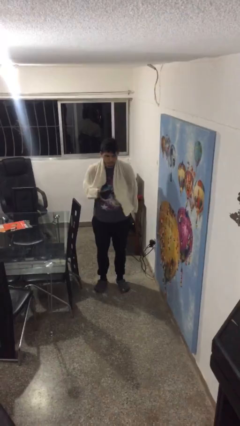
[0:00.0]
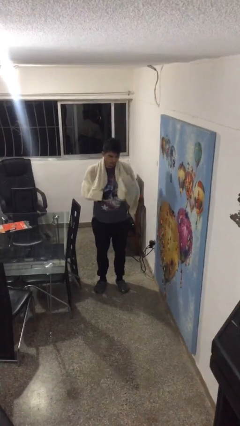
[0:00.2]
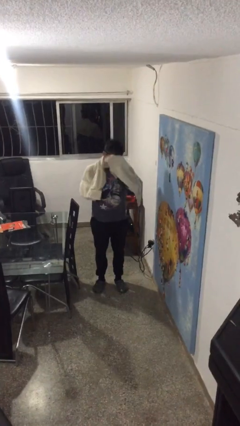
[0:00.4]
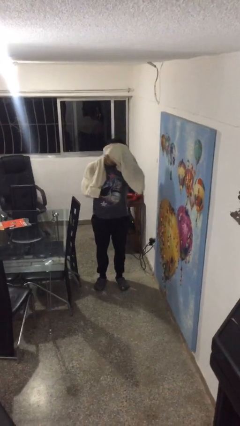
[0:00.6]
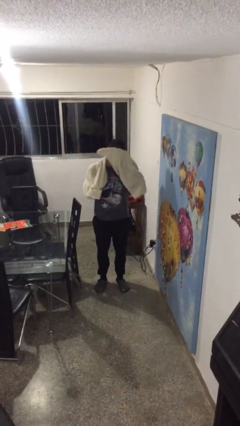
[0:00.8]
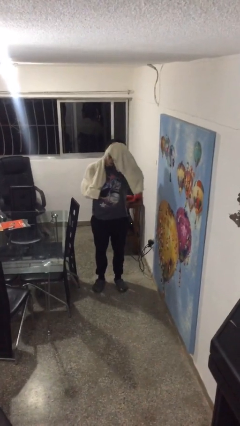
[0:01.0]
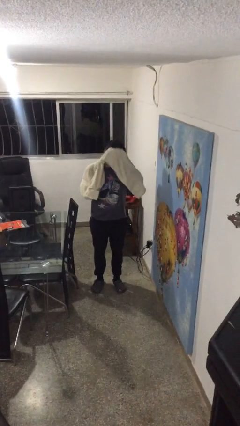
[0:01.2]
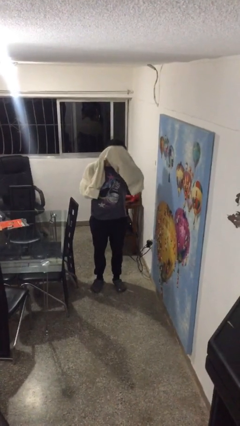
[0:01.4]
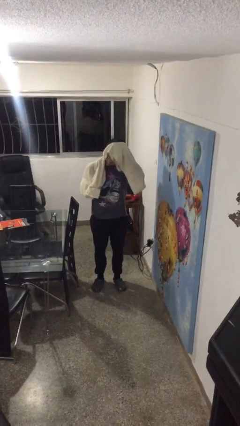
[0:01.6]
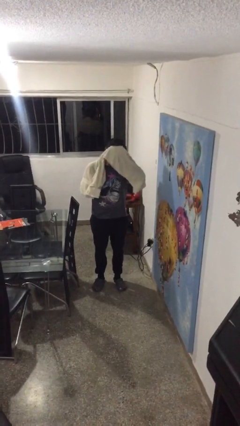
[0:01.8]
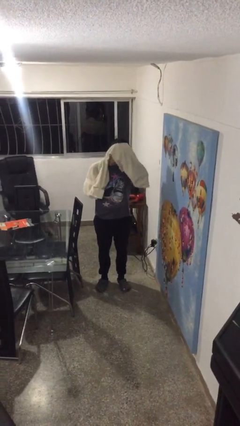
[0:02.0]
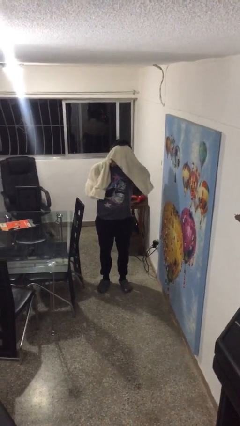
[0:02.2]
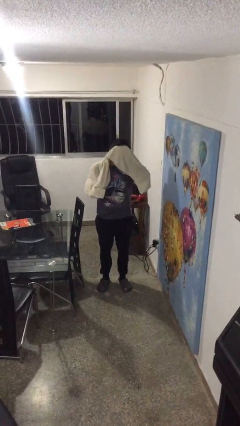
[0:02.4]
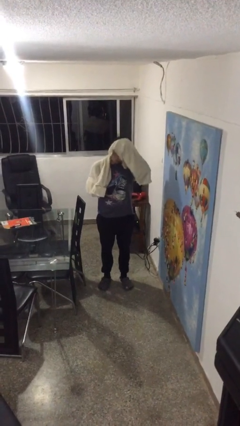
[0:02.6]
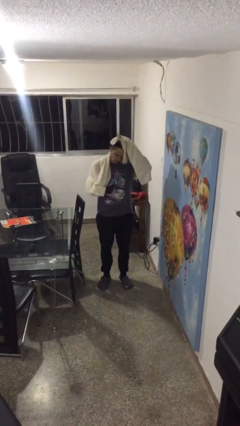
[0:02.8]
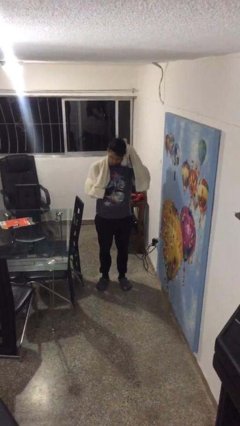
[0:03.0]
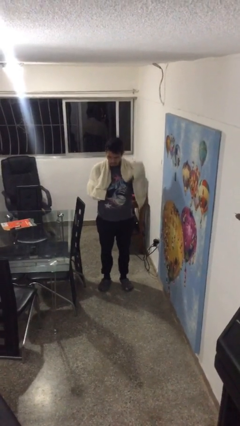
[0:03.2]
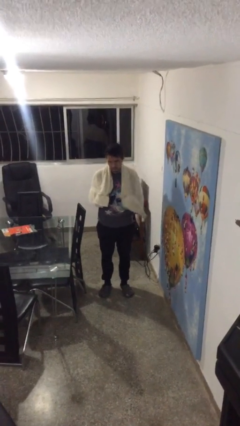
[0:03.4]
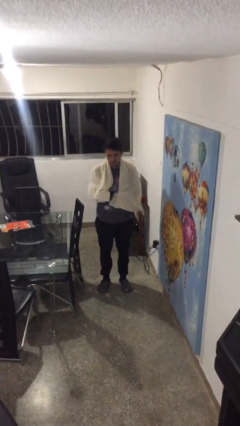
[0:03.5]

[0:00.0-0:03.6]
person dries hair with towel

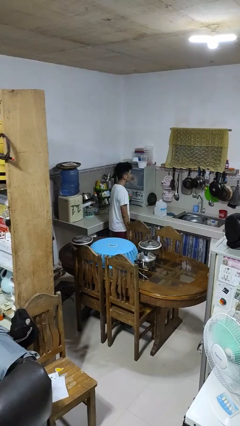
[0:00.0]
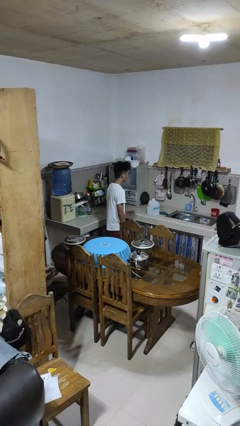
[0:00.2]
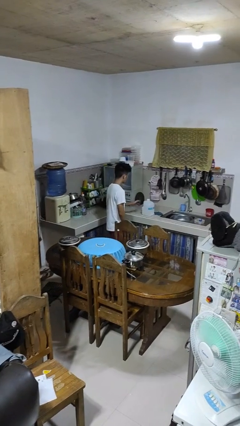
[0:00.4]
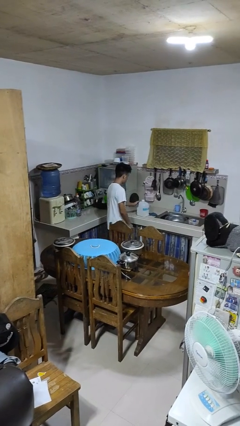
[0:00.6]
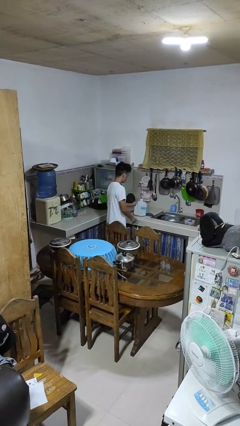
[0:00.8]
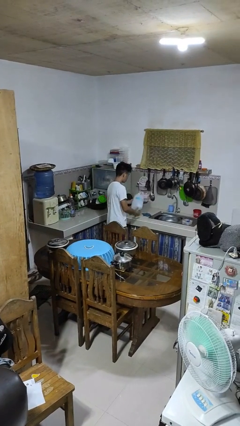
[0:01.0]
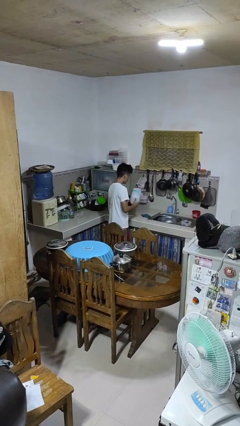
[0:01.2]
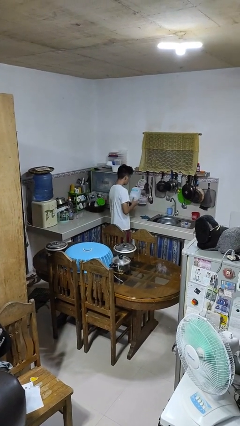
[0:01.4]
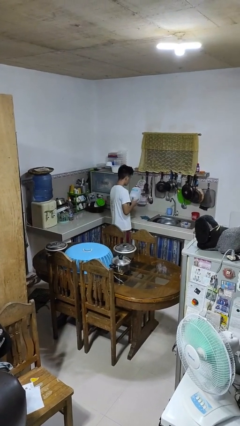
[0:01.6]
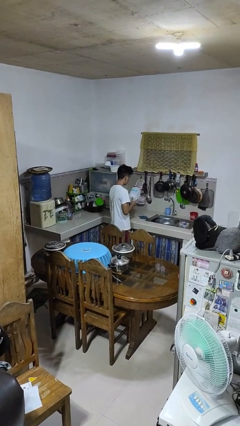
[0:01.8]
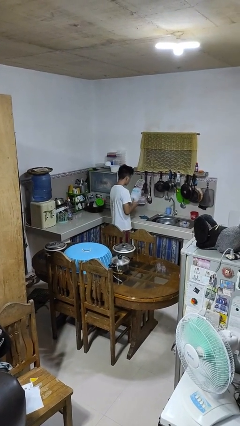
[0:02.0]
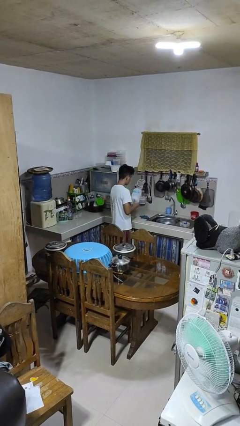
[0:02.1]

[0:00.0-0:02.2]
person picks up object from countertop

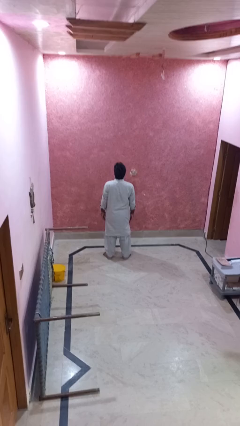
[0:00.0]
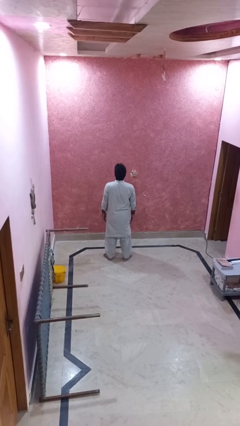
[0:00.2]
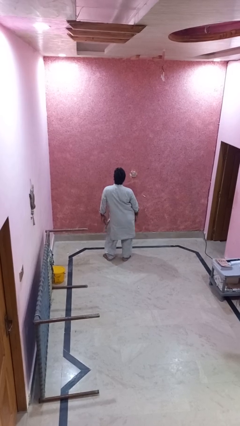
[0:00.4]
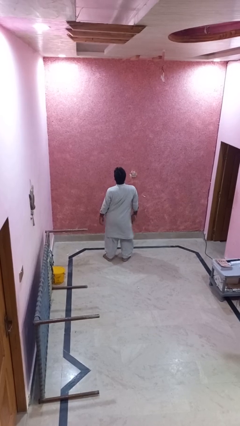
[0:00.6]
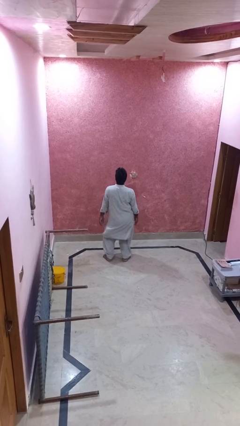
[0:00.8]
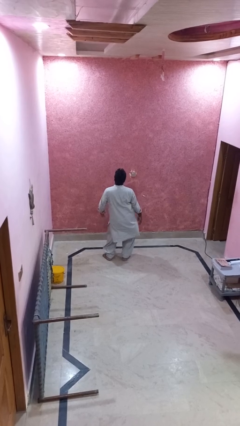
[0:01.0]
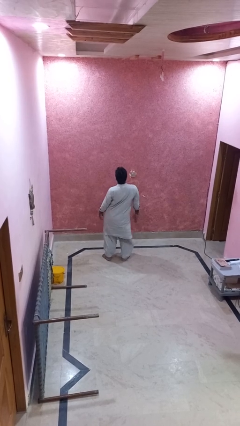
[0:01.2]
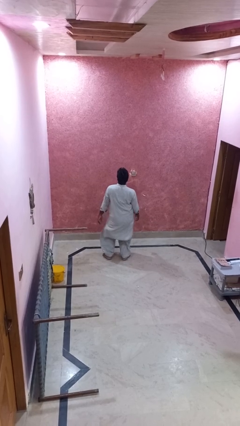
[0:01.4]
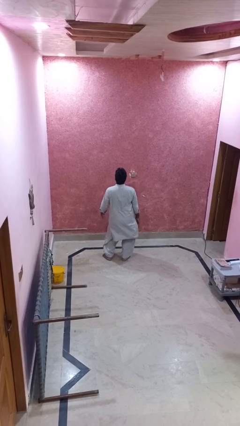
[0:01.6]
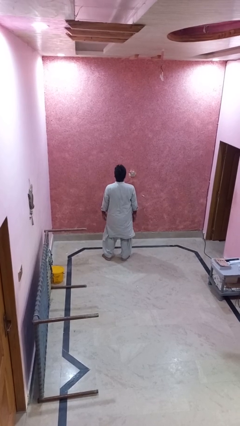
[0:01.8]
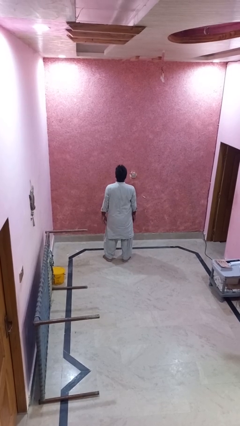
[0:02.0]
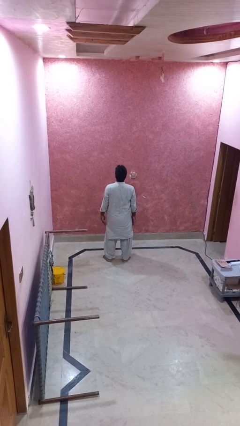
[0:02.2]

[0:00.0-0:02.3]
person wiggles hips

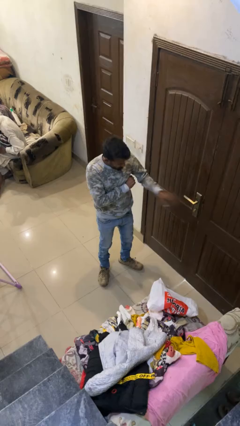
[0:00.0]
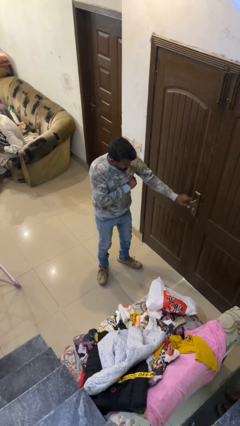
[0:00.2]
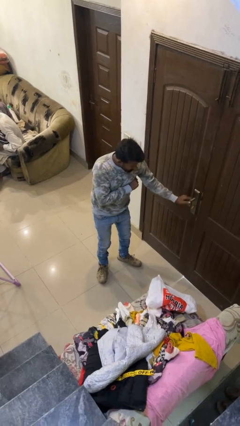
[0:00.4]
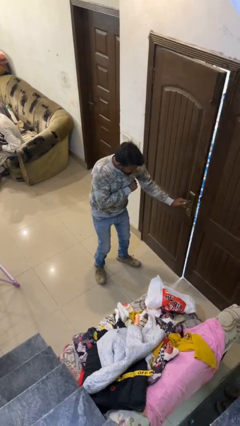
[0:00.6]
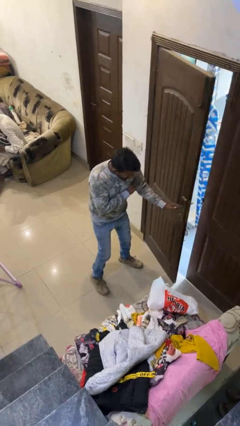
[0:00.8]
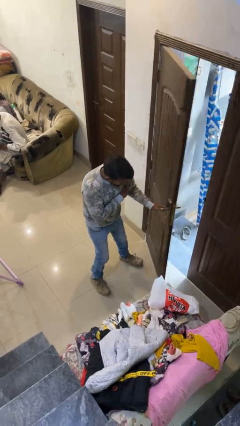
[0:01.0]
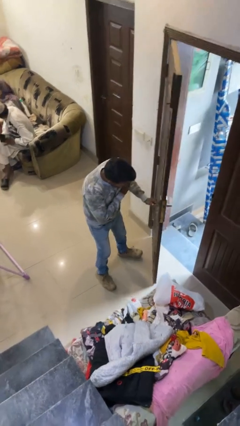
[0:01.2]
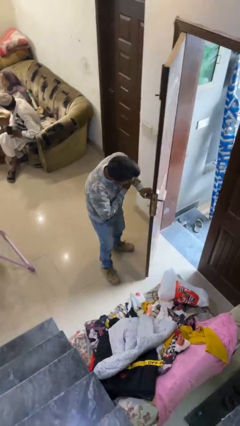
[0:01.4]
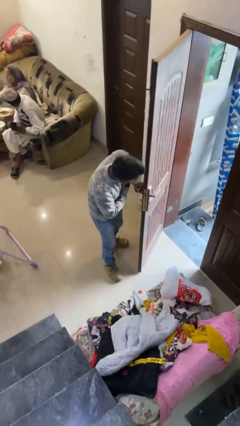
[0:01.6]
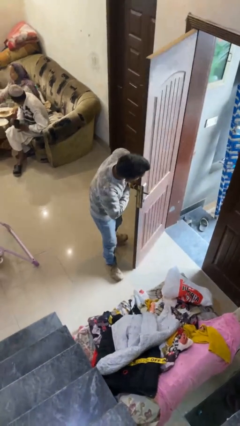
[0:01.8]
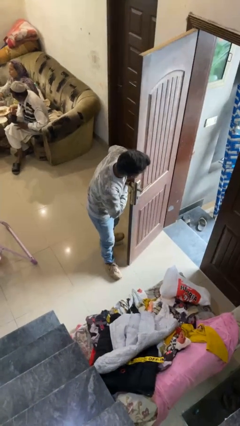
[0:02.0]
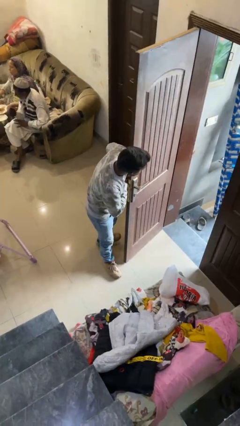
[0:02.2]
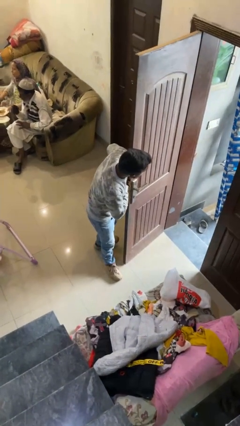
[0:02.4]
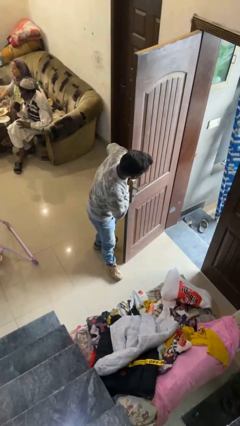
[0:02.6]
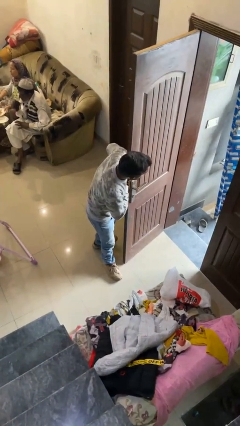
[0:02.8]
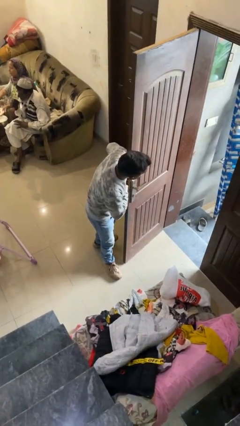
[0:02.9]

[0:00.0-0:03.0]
person opens facility door

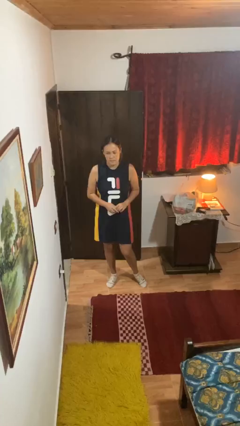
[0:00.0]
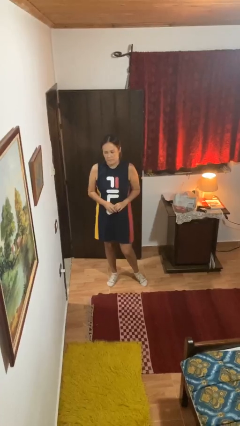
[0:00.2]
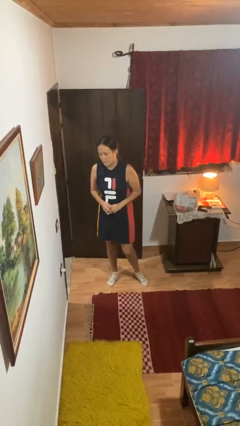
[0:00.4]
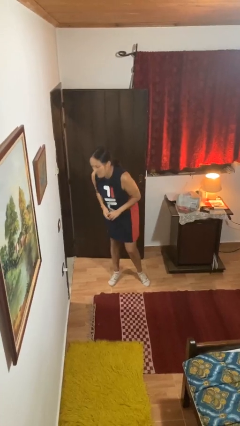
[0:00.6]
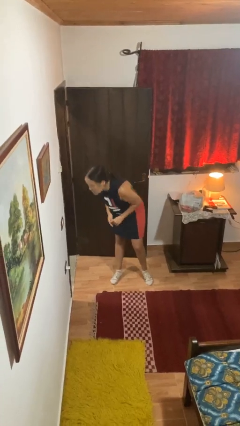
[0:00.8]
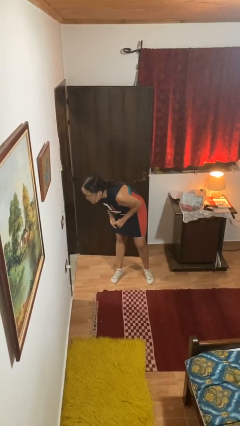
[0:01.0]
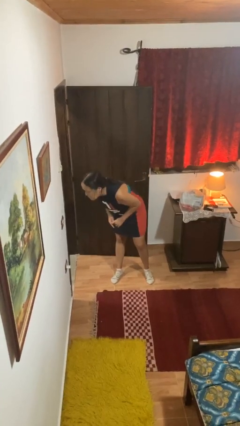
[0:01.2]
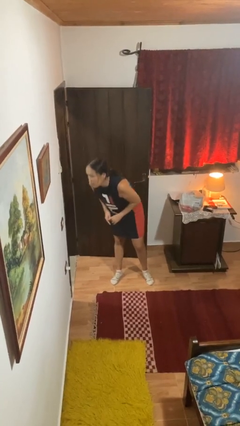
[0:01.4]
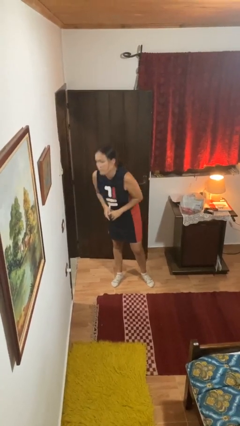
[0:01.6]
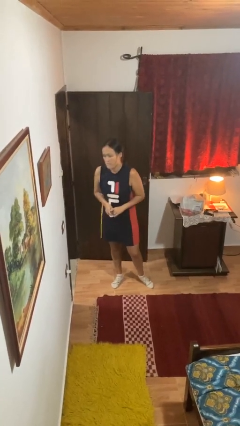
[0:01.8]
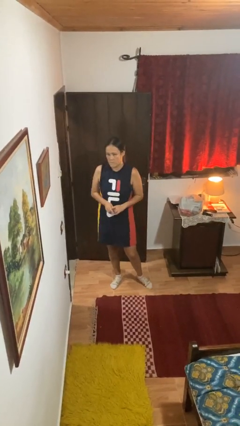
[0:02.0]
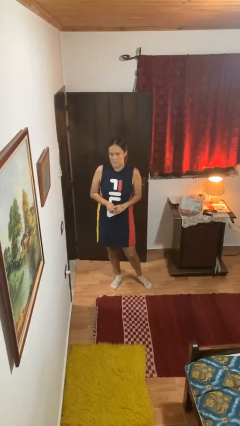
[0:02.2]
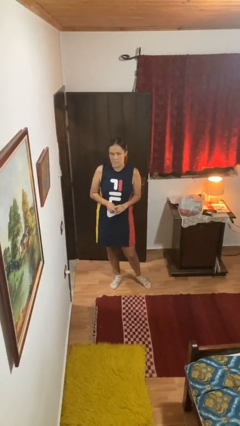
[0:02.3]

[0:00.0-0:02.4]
person bows

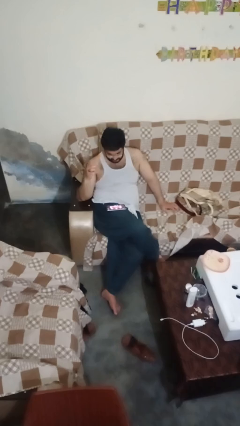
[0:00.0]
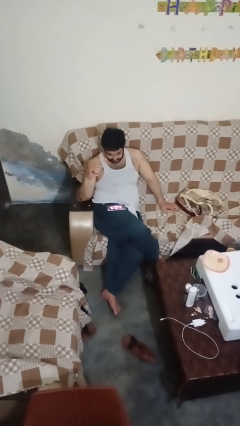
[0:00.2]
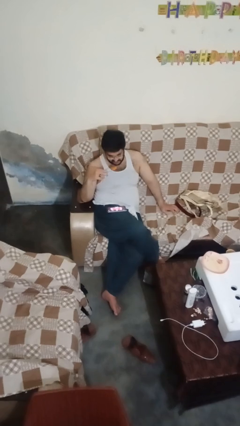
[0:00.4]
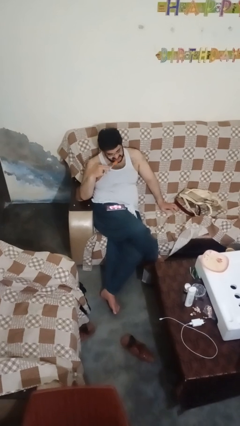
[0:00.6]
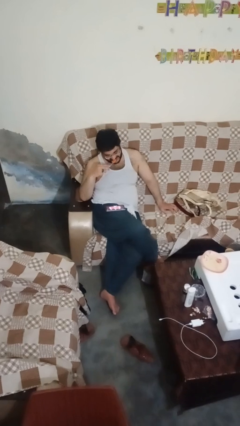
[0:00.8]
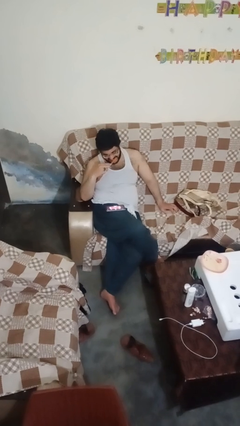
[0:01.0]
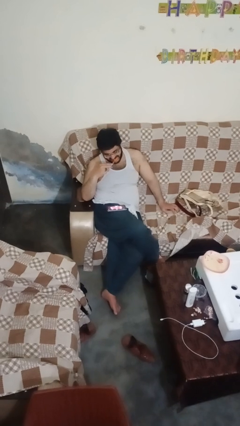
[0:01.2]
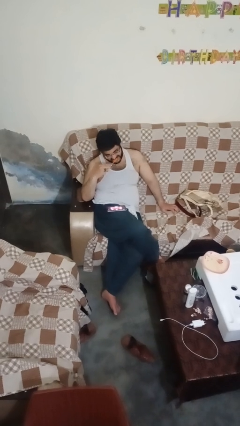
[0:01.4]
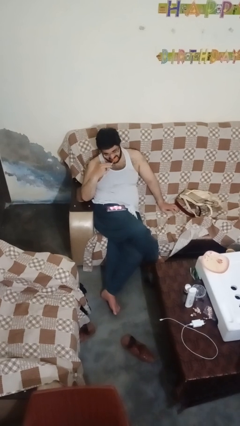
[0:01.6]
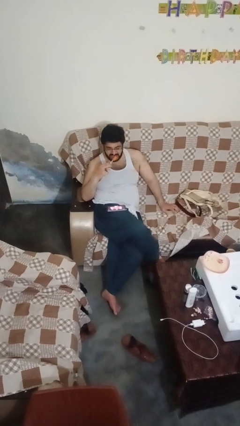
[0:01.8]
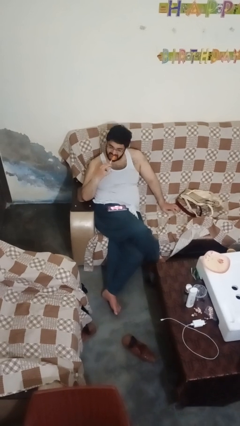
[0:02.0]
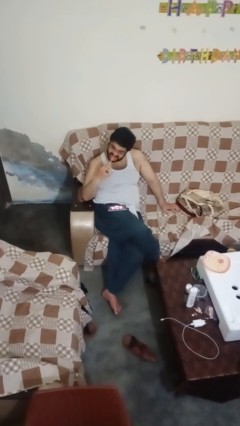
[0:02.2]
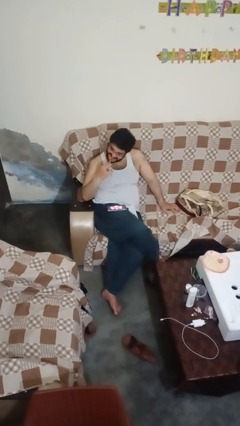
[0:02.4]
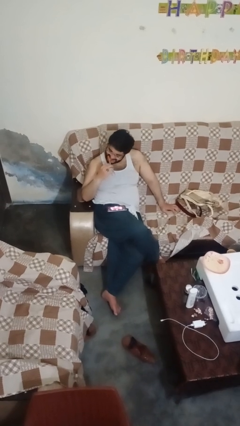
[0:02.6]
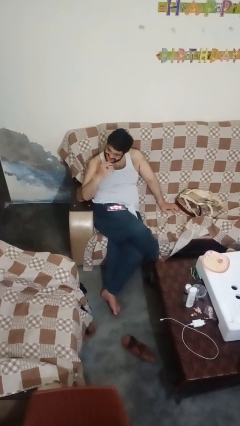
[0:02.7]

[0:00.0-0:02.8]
person brushes teeth

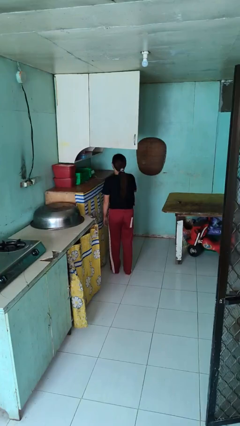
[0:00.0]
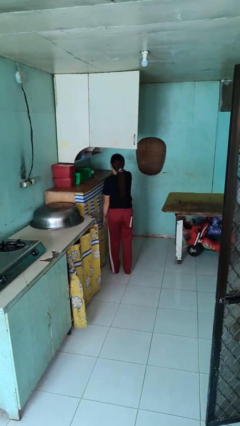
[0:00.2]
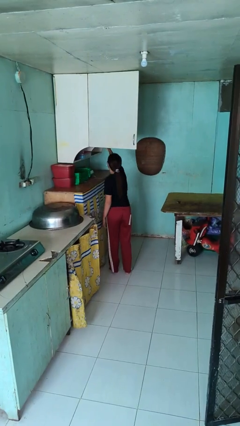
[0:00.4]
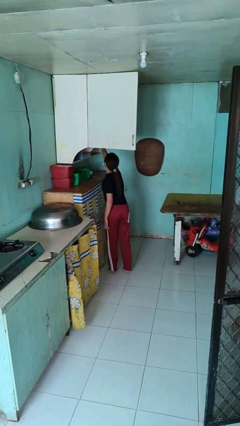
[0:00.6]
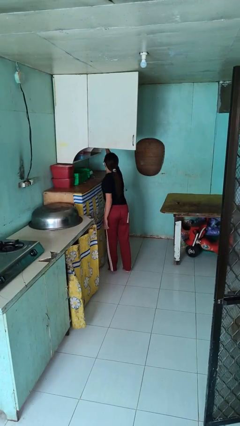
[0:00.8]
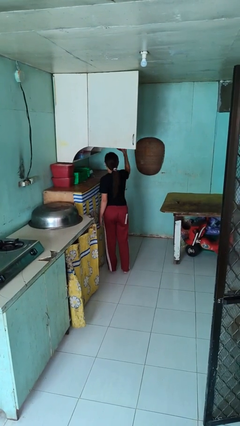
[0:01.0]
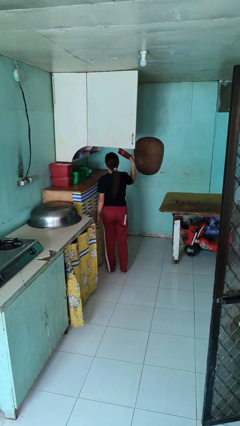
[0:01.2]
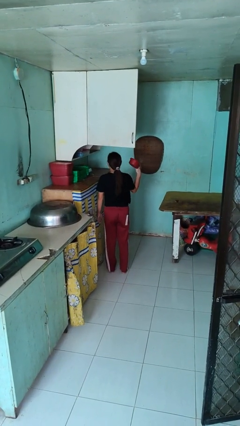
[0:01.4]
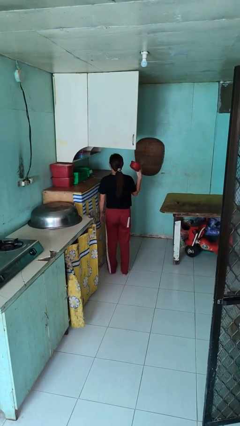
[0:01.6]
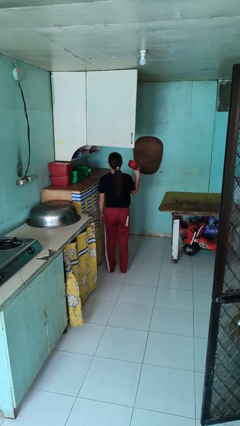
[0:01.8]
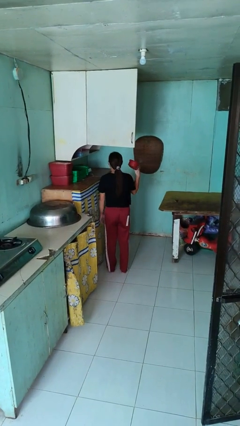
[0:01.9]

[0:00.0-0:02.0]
person takes object from cabinet
